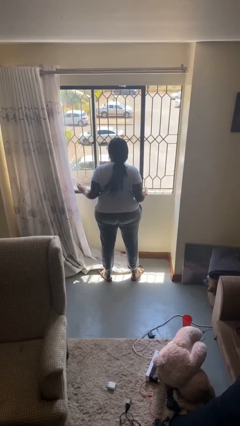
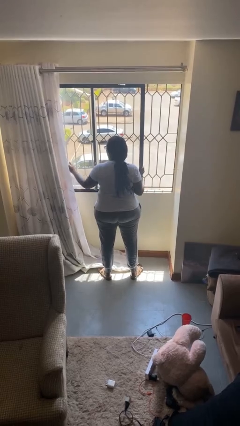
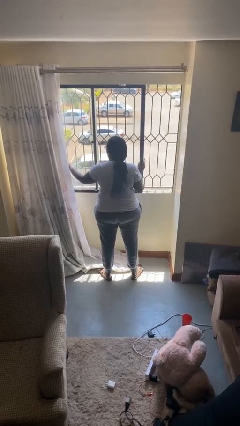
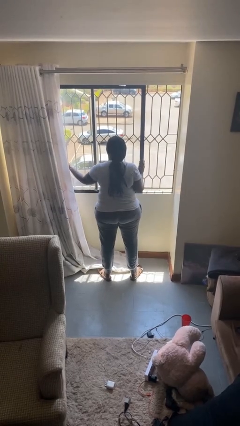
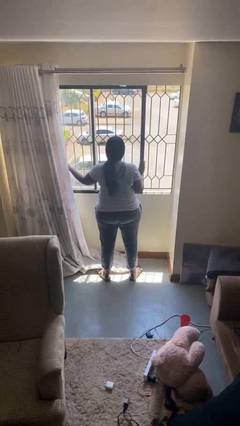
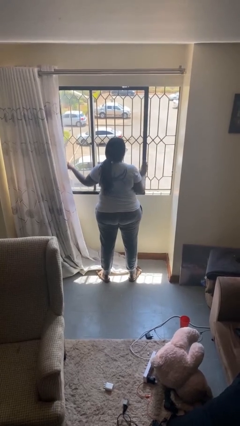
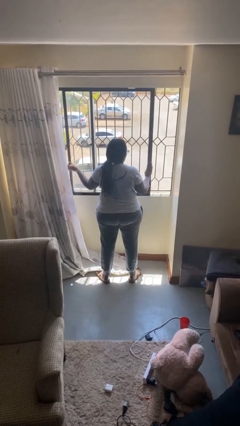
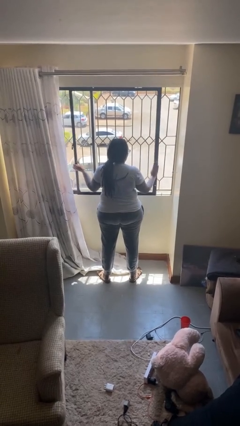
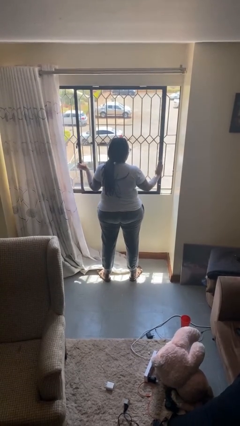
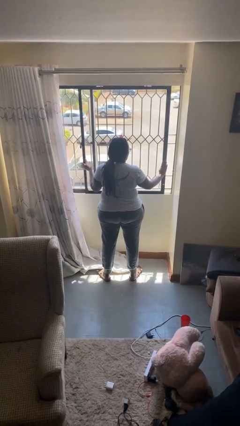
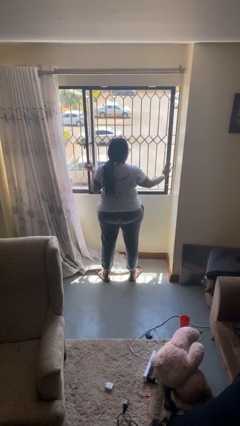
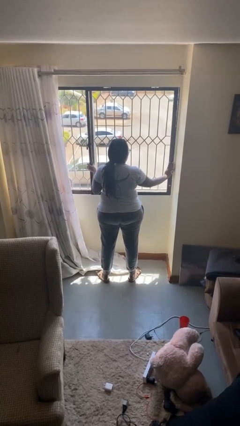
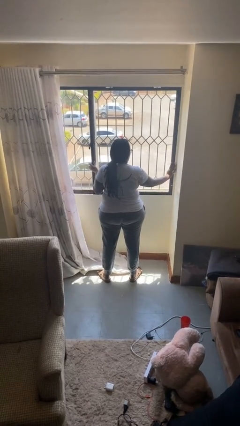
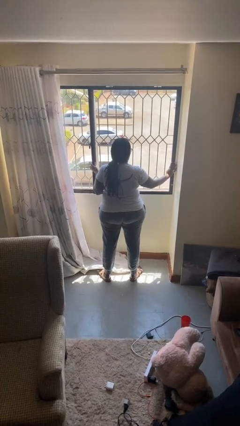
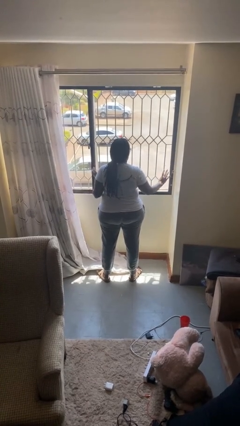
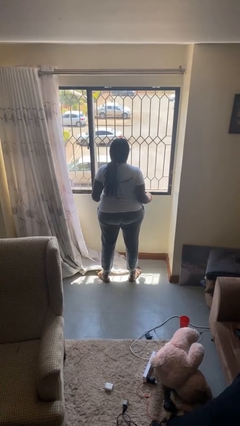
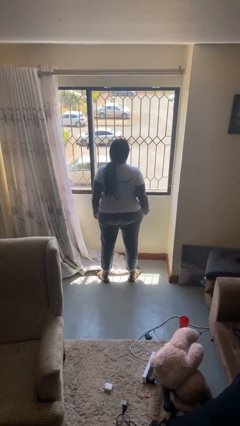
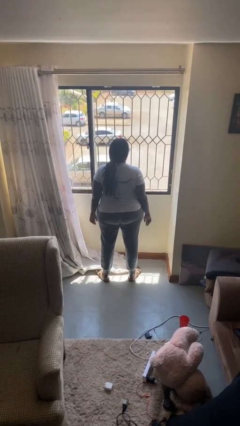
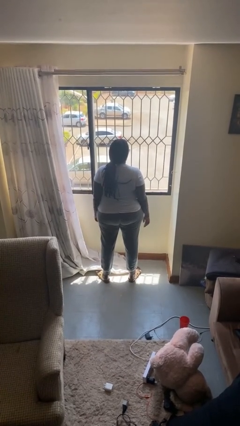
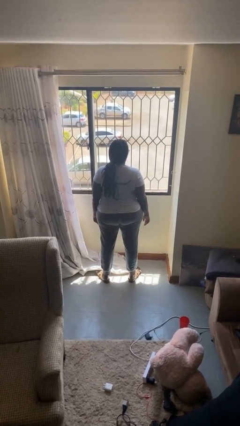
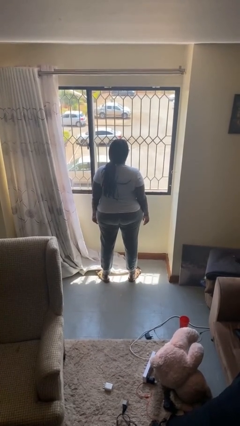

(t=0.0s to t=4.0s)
person closes home window

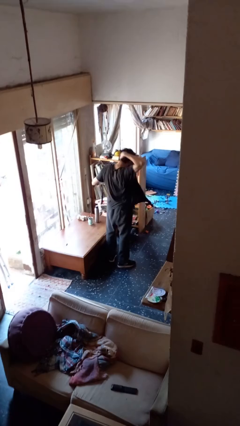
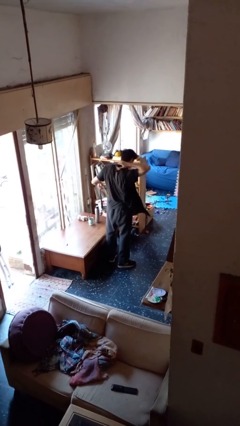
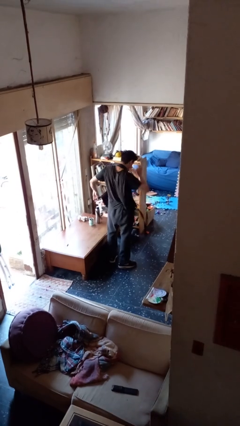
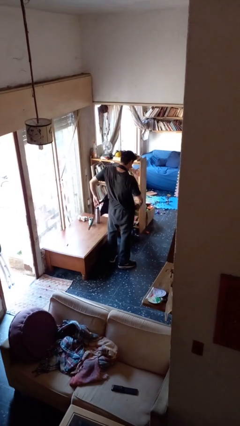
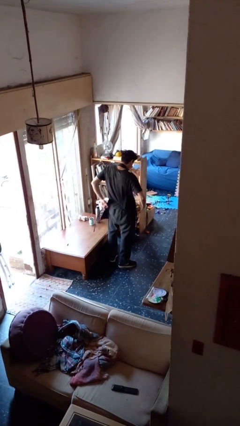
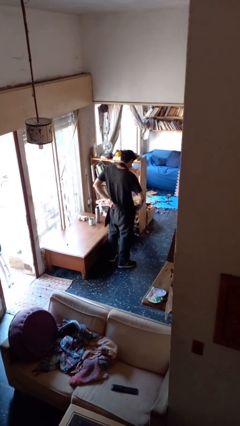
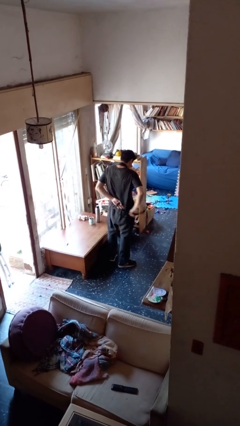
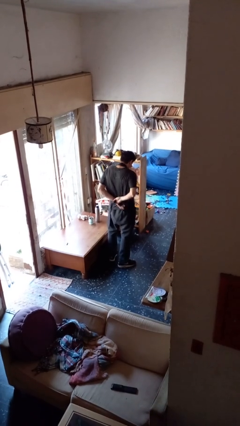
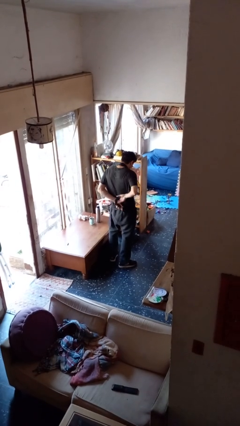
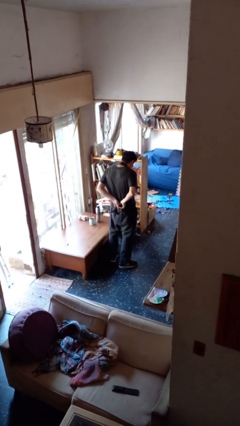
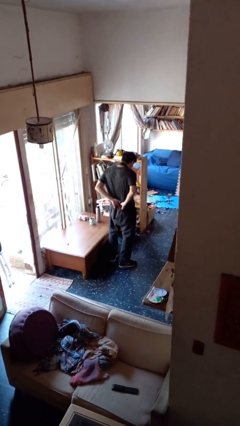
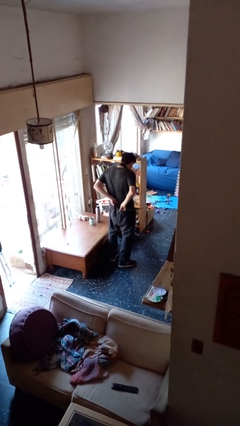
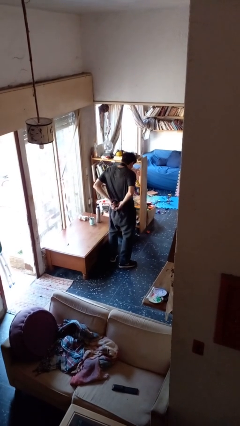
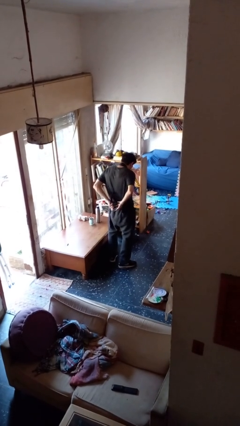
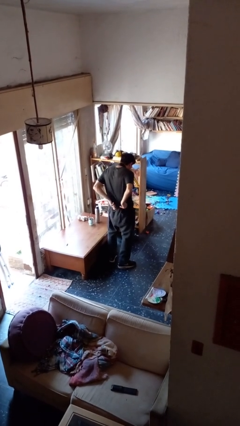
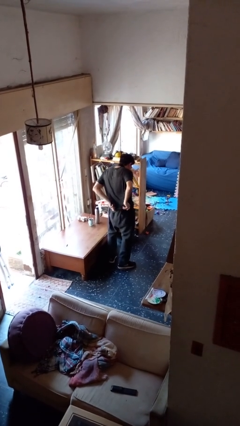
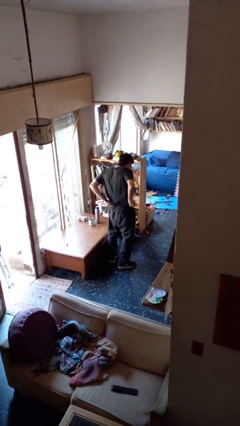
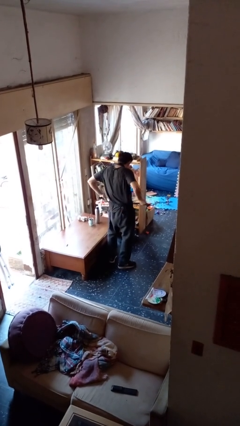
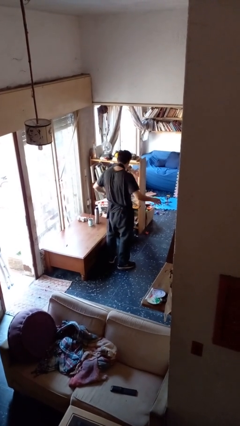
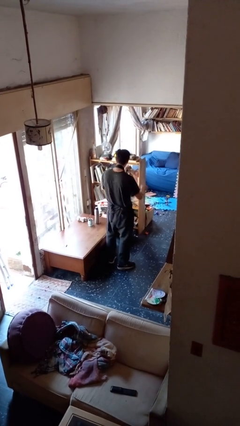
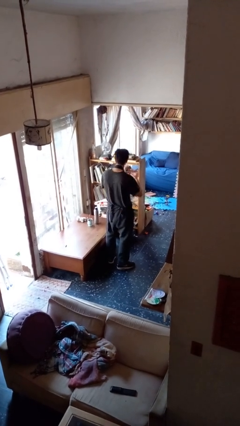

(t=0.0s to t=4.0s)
person puts on apron

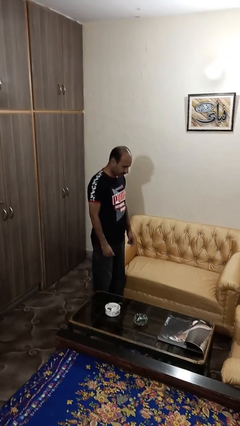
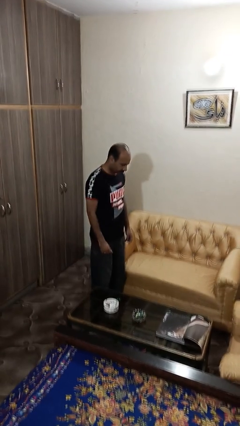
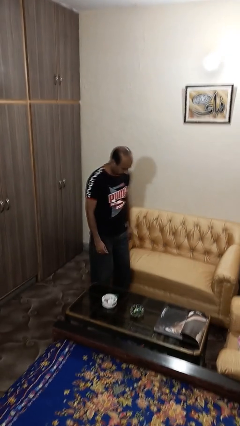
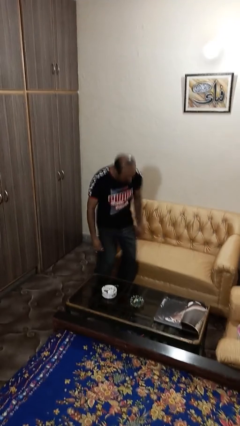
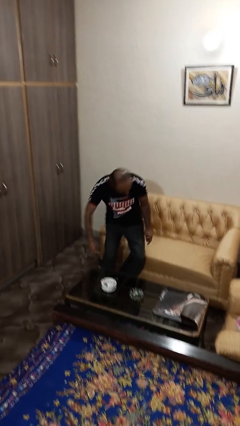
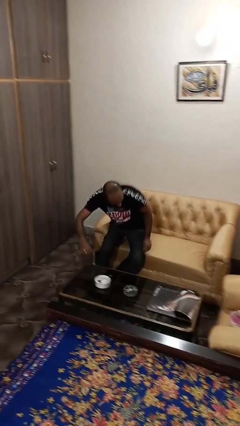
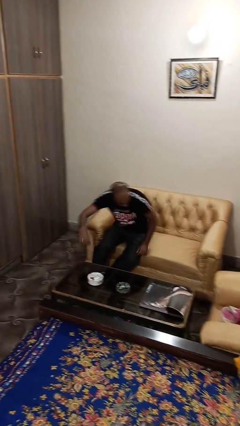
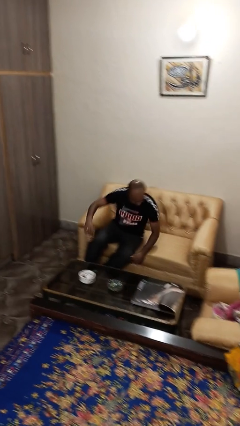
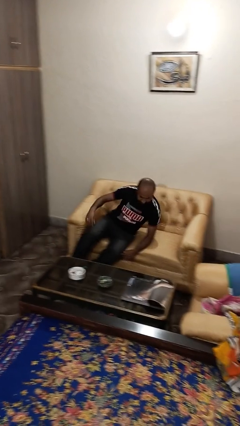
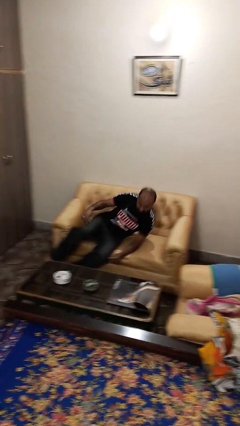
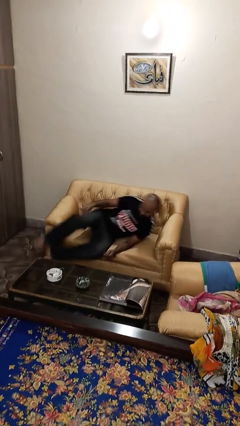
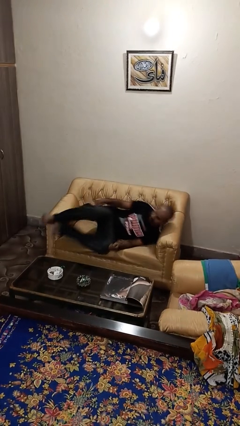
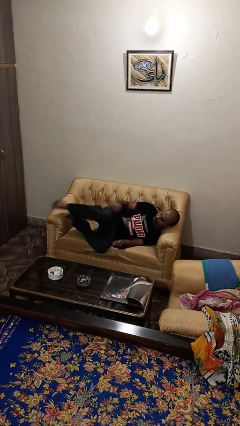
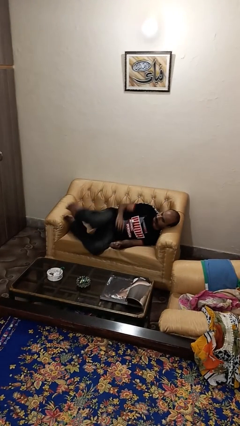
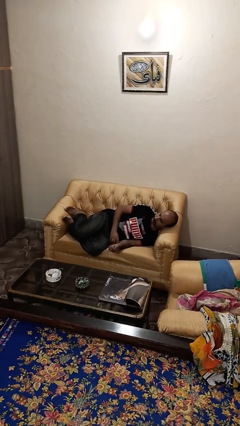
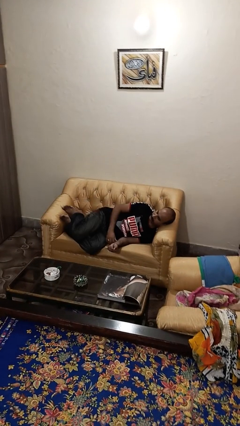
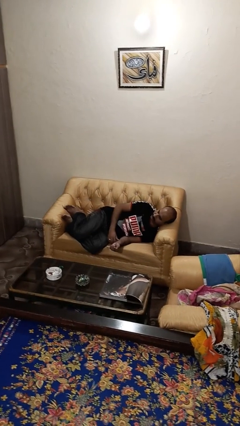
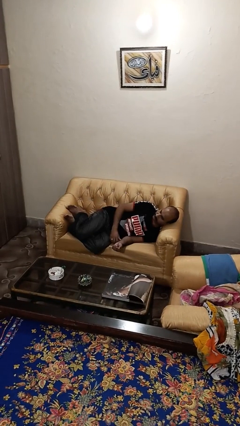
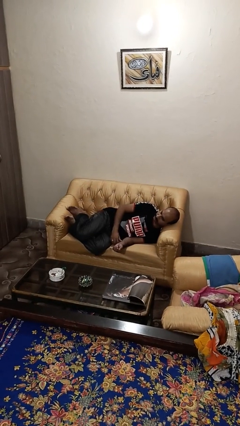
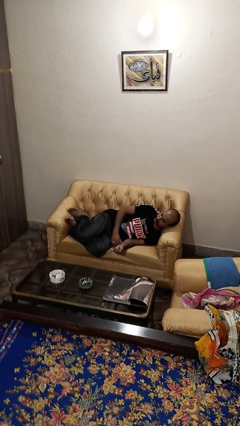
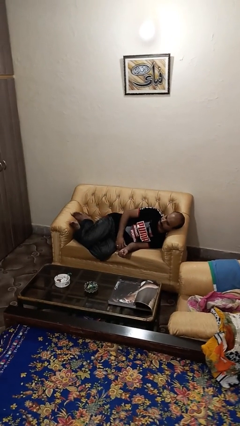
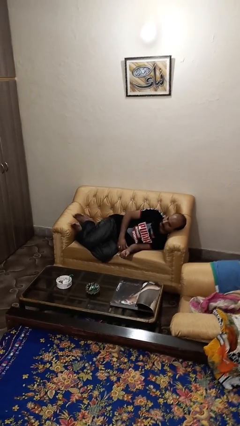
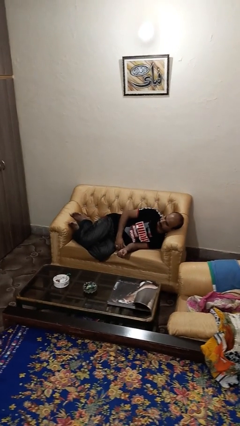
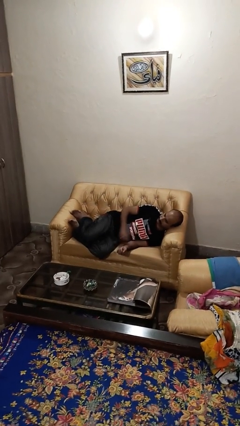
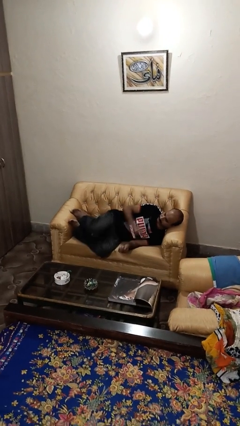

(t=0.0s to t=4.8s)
person lies down on couch

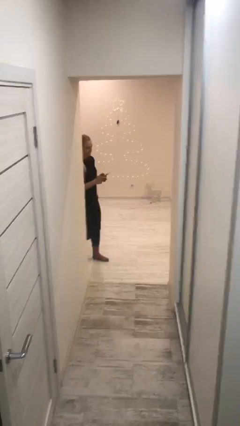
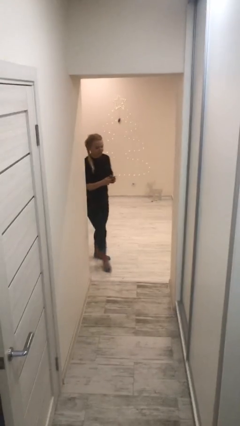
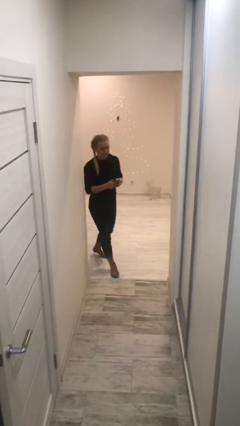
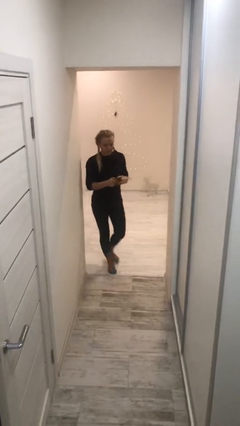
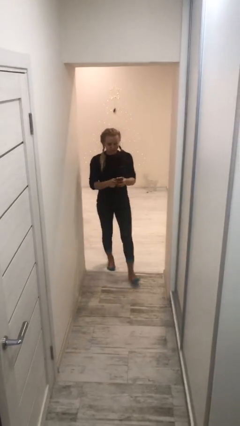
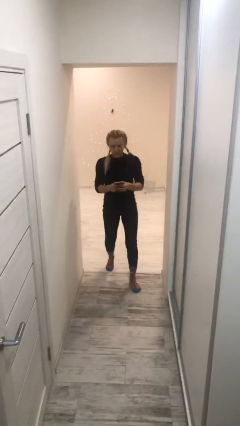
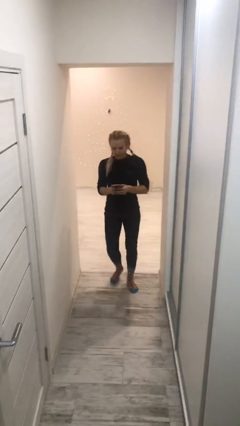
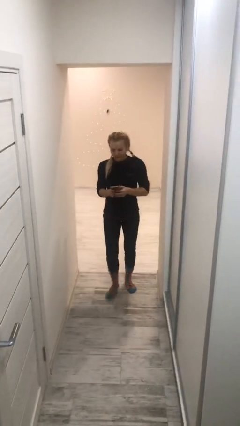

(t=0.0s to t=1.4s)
person enters scene through structure

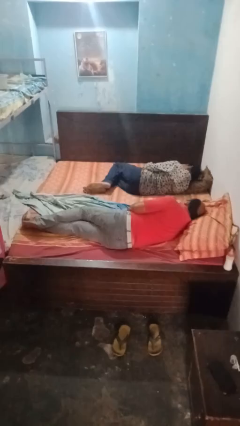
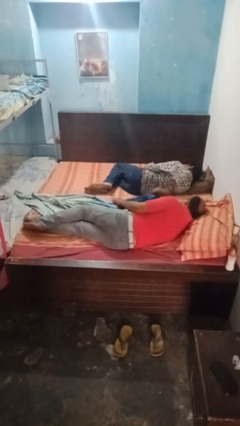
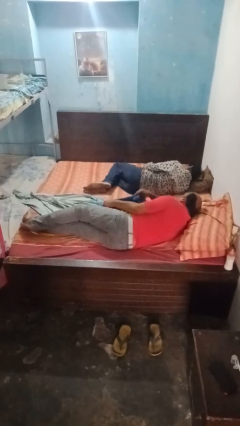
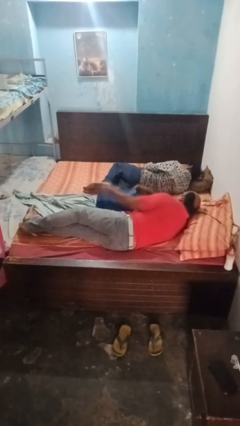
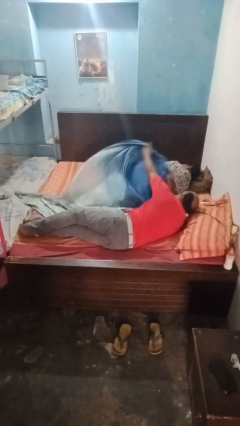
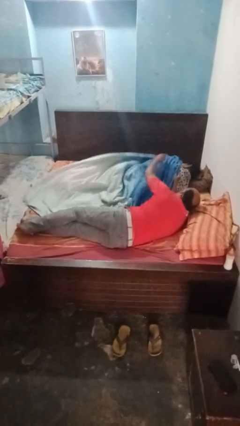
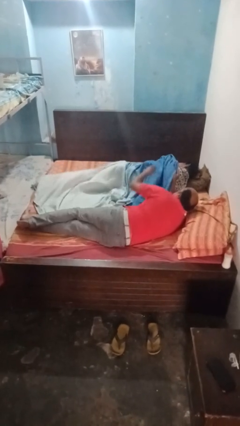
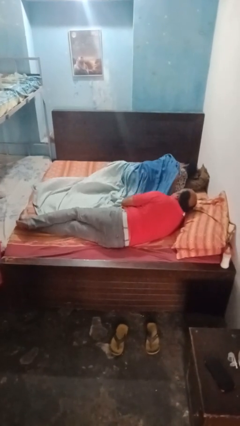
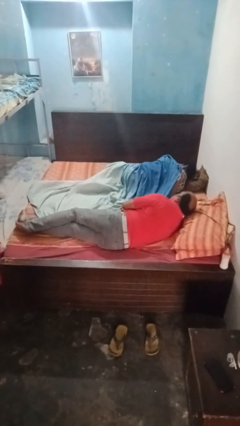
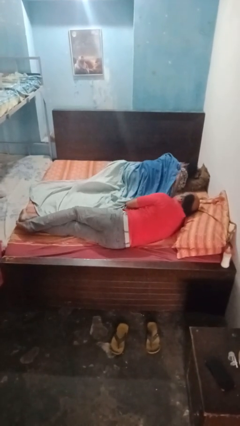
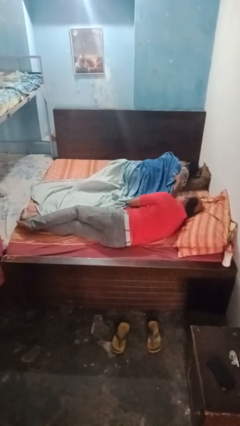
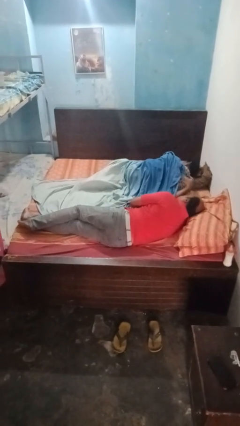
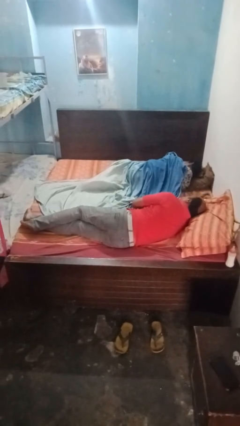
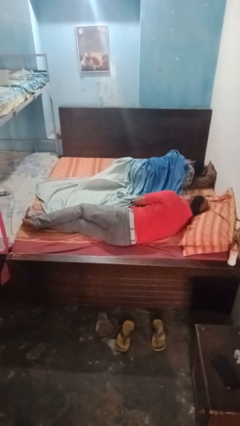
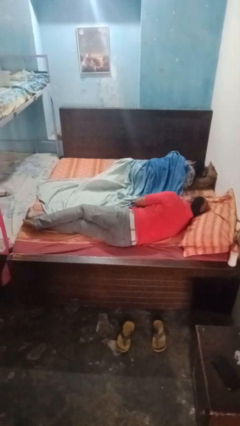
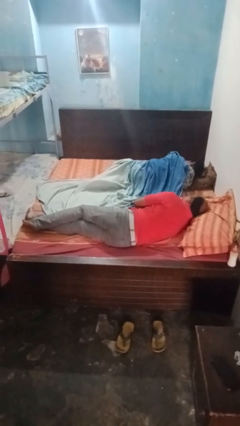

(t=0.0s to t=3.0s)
person covers friend with blanket

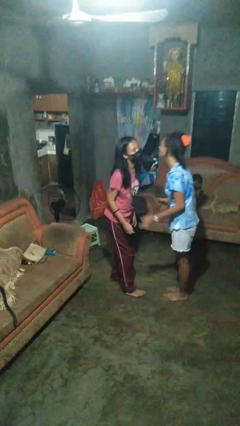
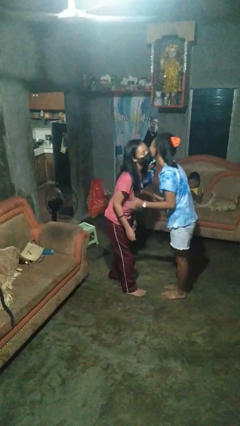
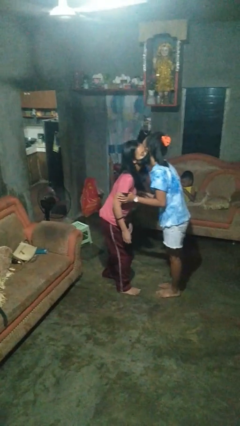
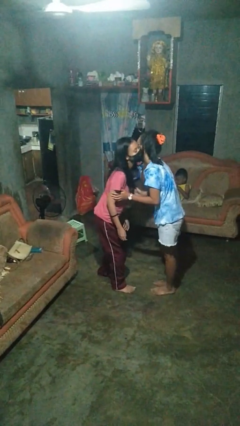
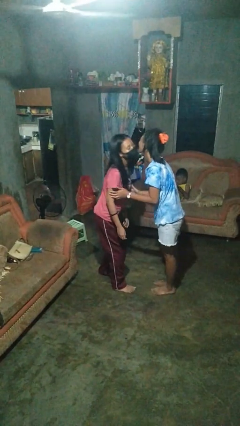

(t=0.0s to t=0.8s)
person kisses cheek of person
